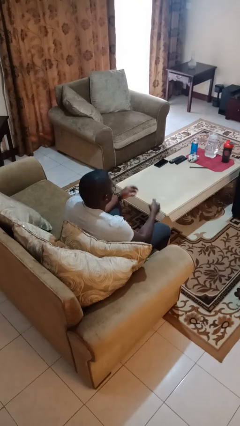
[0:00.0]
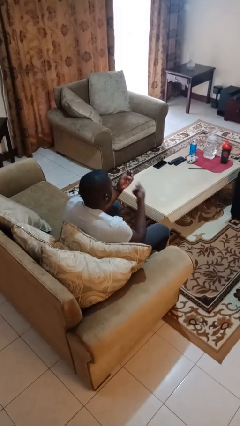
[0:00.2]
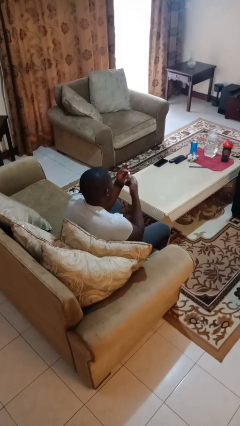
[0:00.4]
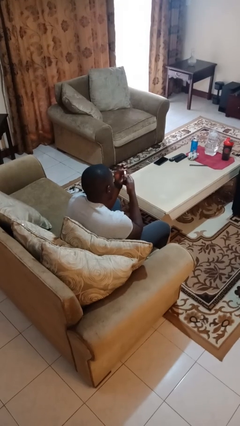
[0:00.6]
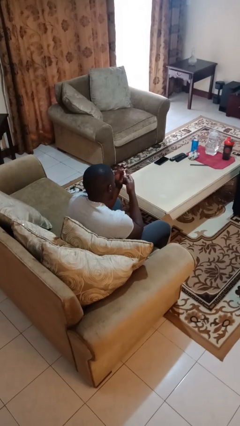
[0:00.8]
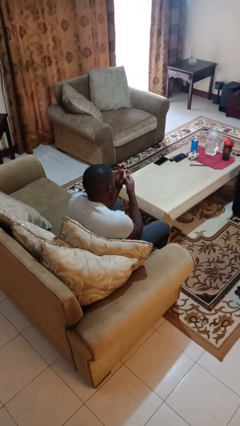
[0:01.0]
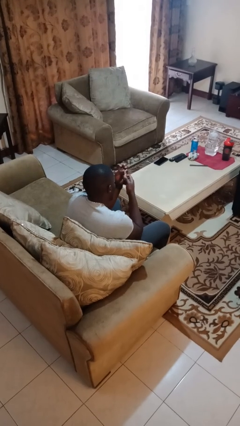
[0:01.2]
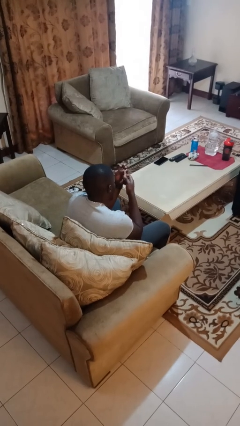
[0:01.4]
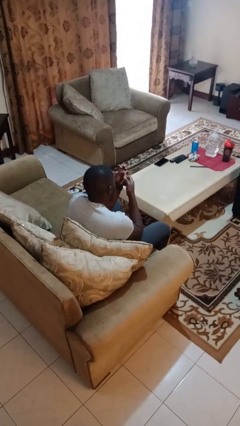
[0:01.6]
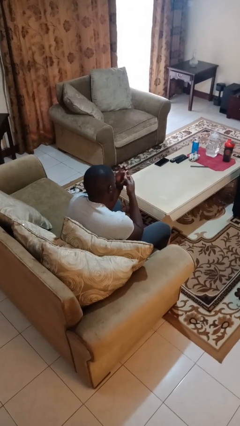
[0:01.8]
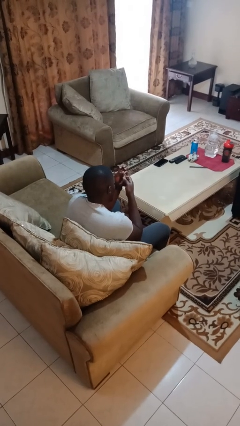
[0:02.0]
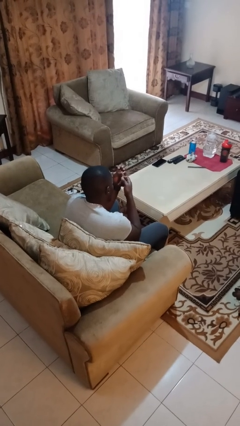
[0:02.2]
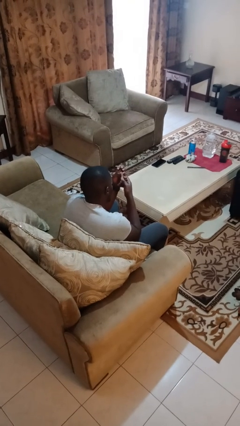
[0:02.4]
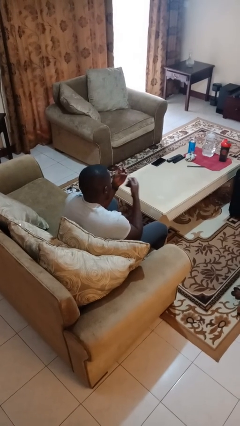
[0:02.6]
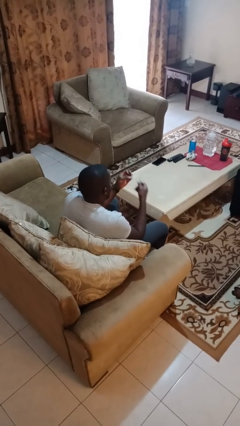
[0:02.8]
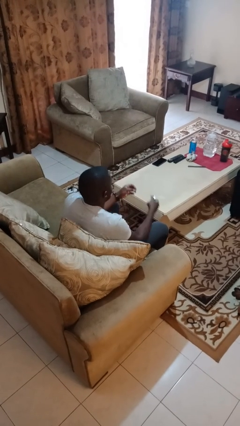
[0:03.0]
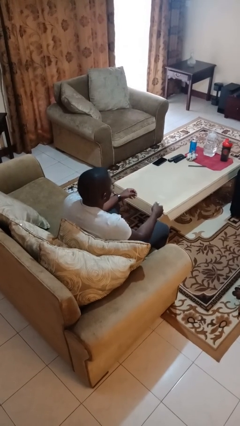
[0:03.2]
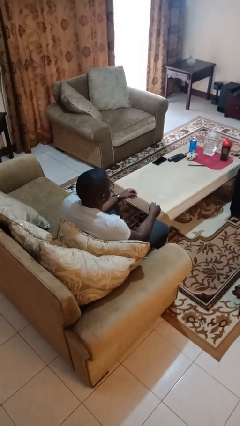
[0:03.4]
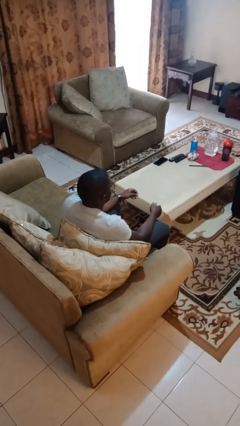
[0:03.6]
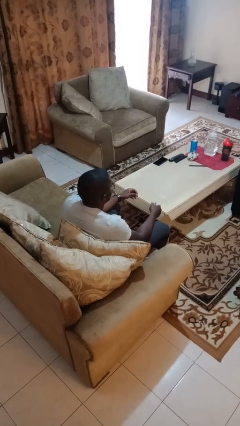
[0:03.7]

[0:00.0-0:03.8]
person clips fingernails

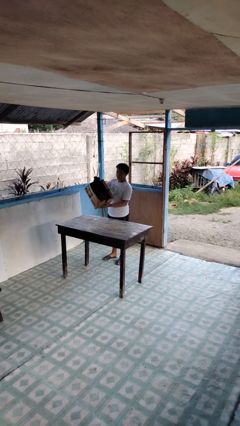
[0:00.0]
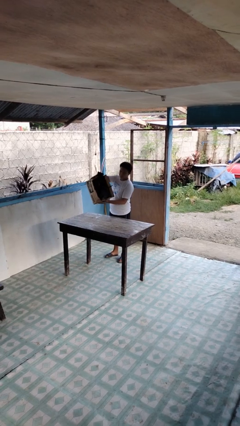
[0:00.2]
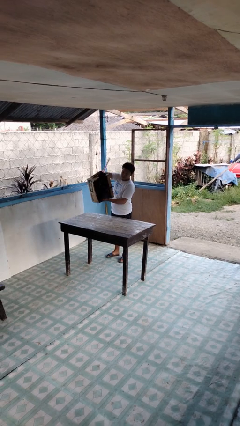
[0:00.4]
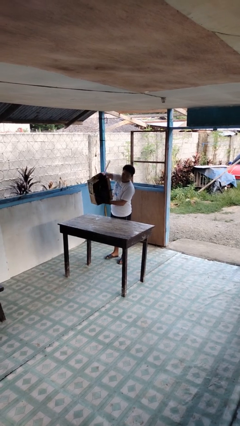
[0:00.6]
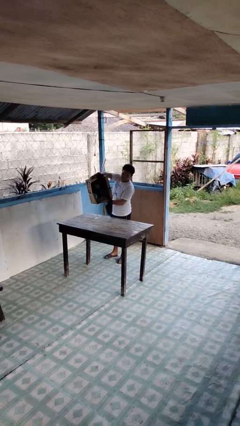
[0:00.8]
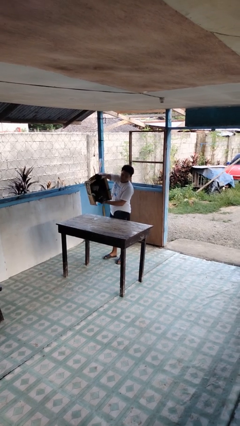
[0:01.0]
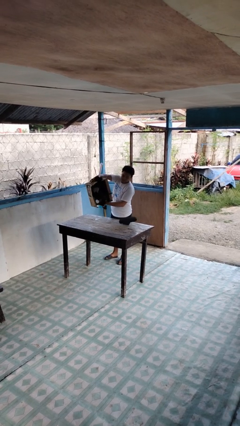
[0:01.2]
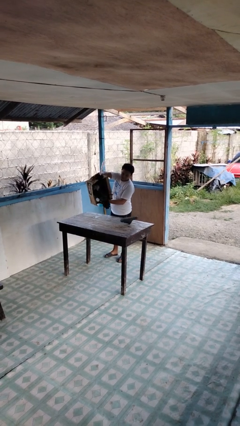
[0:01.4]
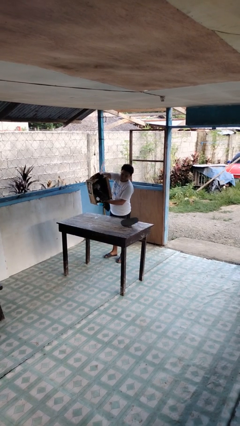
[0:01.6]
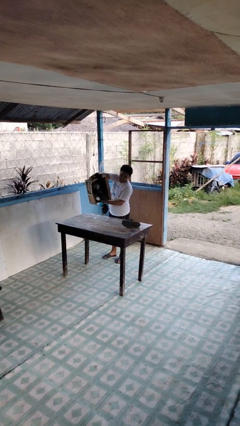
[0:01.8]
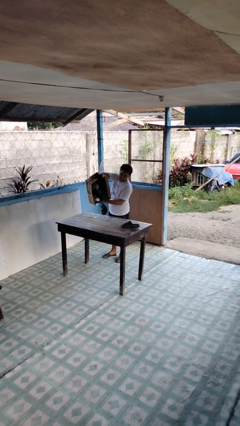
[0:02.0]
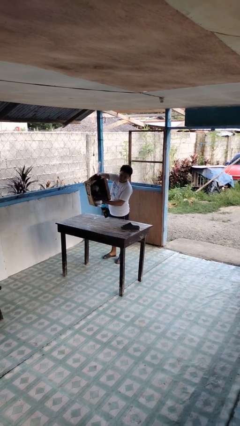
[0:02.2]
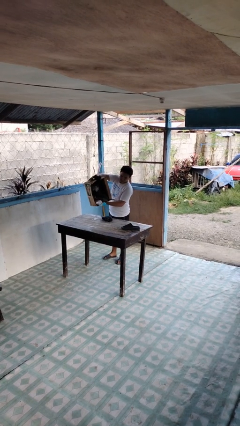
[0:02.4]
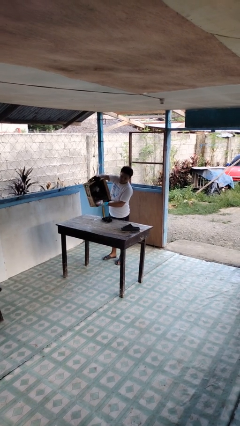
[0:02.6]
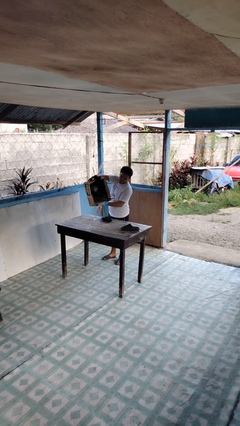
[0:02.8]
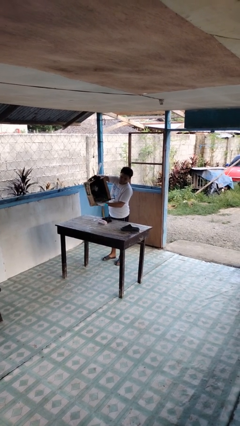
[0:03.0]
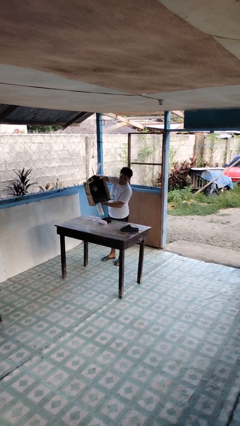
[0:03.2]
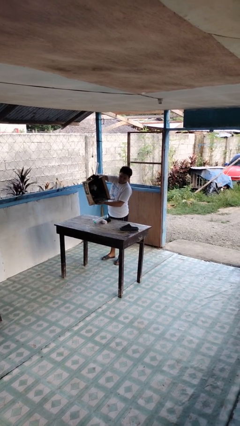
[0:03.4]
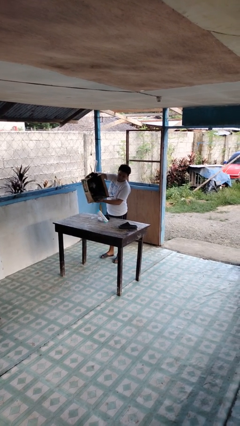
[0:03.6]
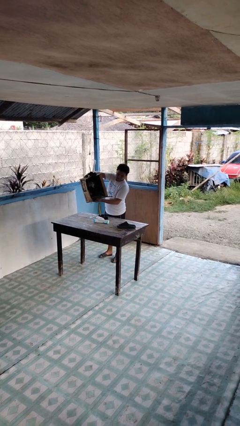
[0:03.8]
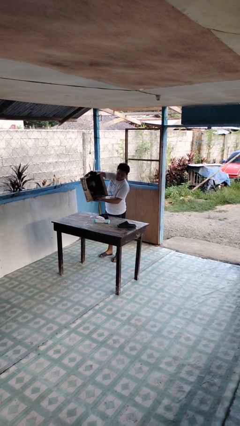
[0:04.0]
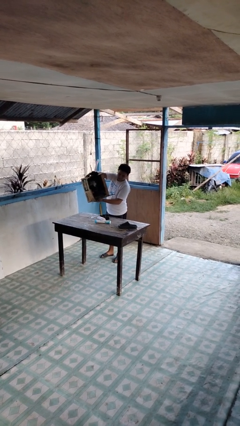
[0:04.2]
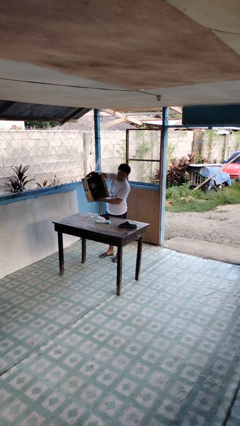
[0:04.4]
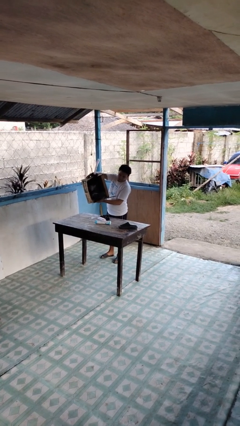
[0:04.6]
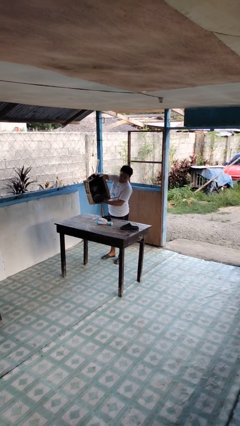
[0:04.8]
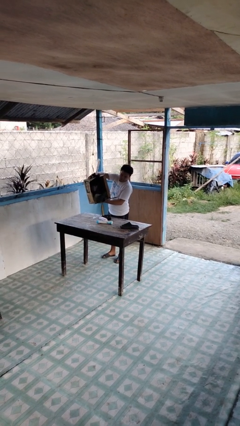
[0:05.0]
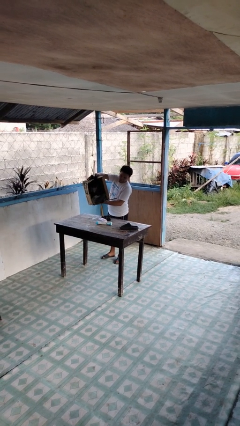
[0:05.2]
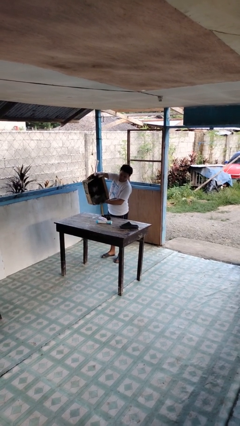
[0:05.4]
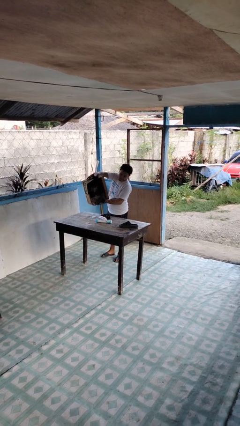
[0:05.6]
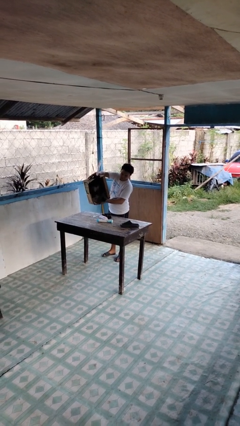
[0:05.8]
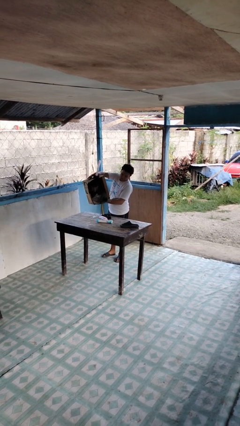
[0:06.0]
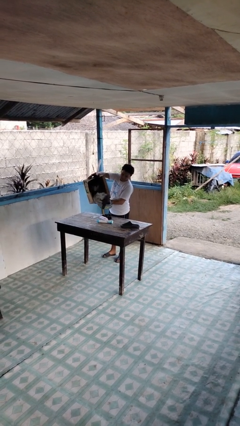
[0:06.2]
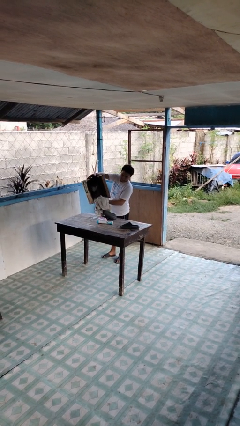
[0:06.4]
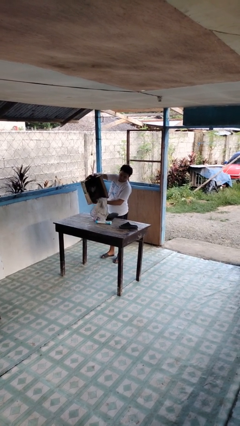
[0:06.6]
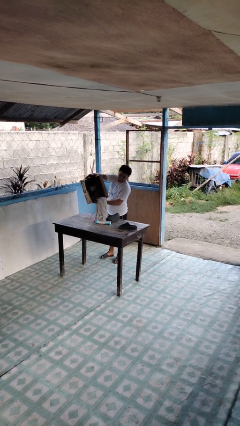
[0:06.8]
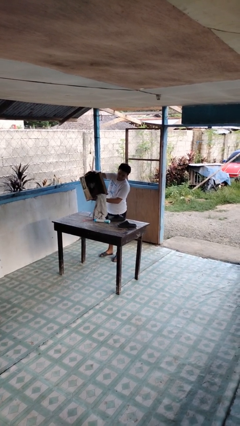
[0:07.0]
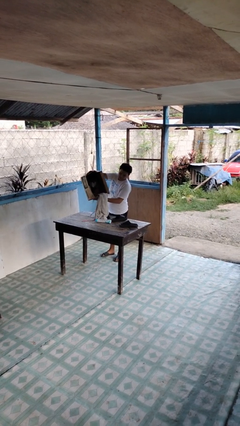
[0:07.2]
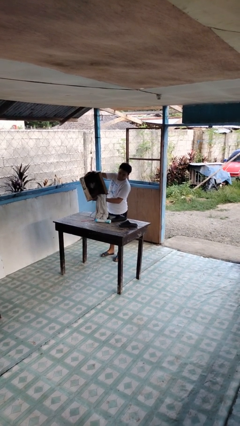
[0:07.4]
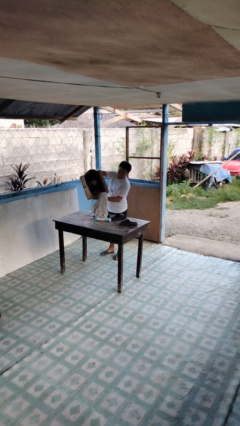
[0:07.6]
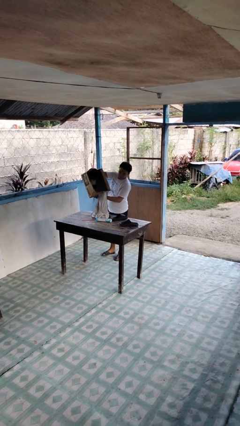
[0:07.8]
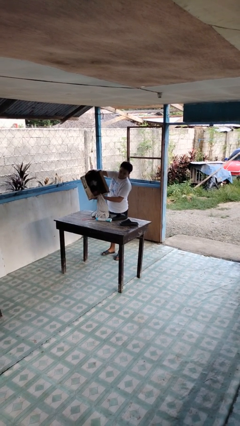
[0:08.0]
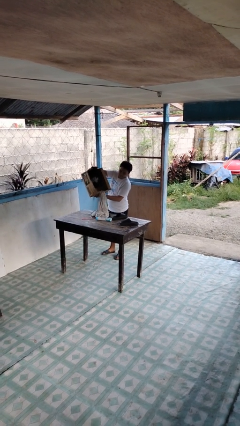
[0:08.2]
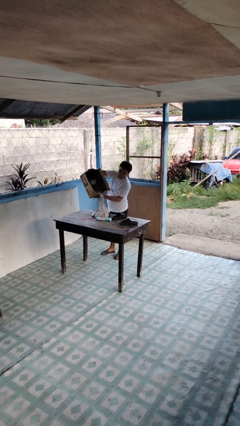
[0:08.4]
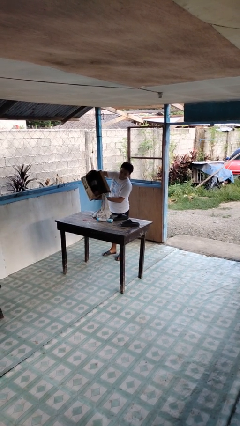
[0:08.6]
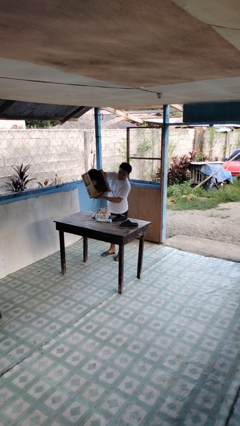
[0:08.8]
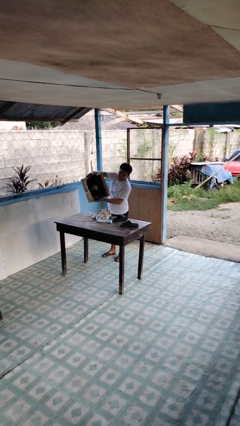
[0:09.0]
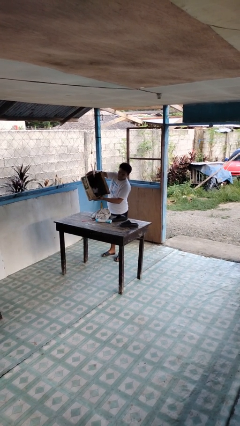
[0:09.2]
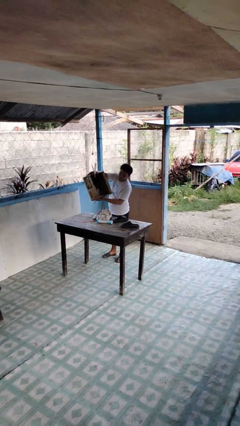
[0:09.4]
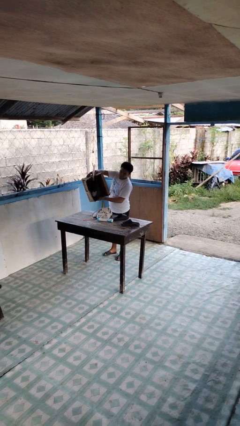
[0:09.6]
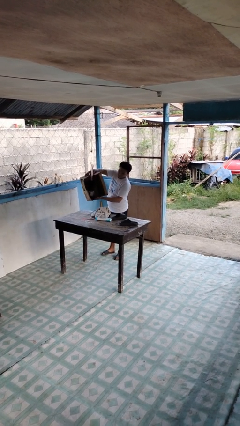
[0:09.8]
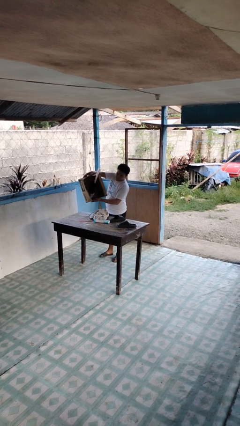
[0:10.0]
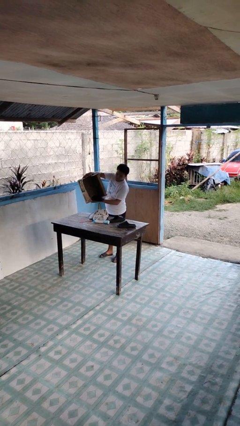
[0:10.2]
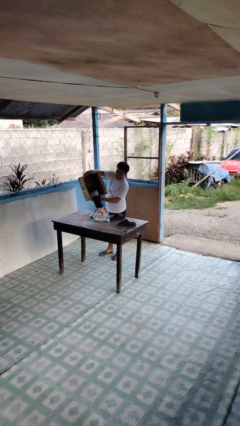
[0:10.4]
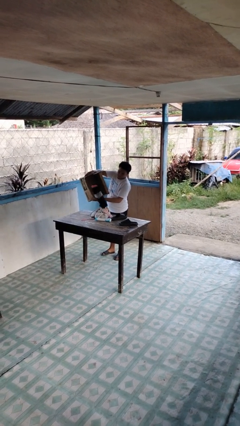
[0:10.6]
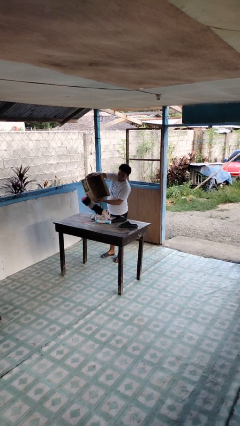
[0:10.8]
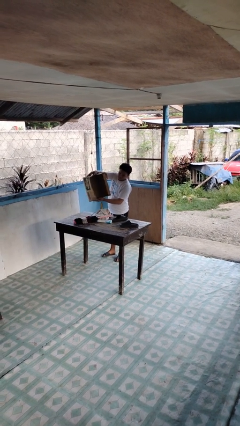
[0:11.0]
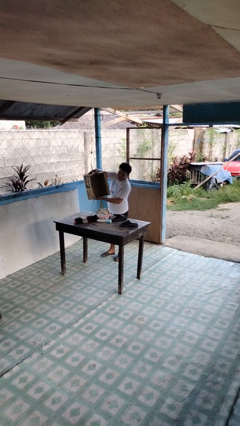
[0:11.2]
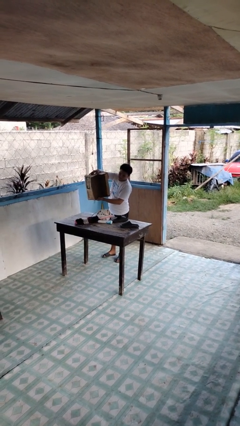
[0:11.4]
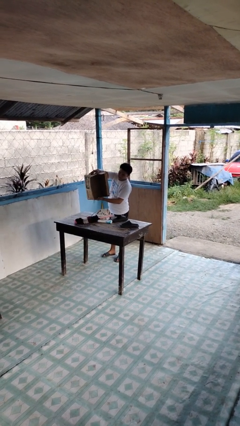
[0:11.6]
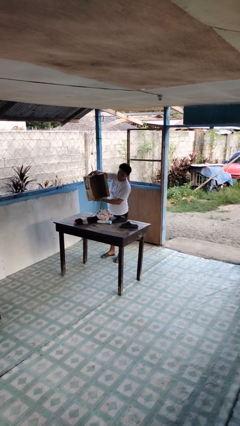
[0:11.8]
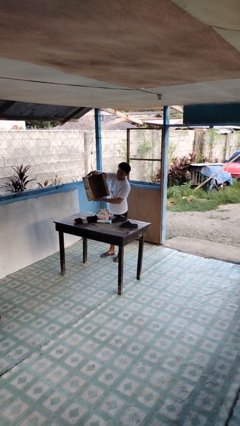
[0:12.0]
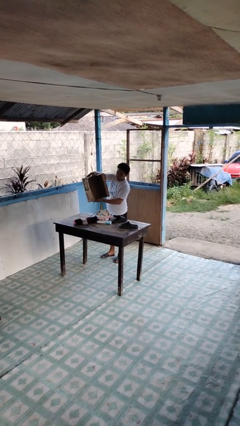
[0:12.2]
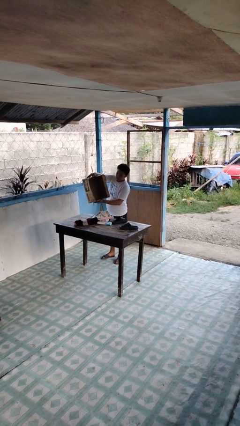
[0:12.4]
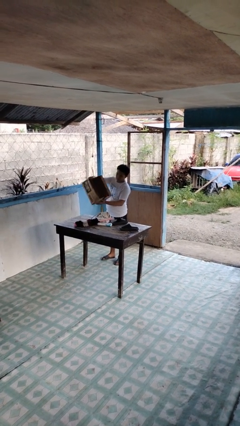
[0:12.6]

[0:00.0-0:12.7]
person unloads box onto table

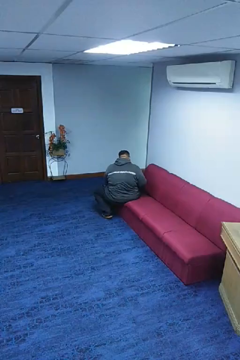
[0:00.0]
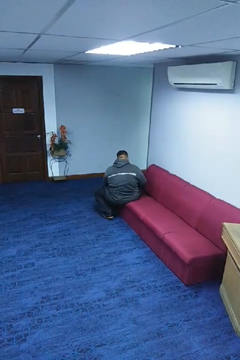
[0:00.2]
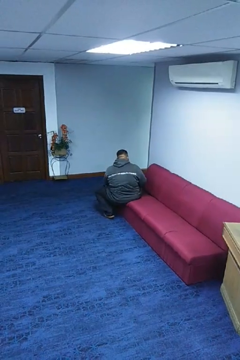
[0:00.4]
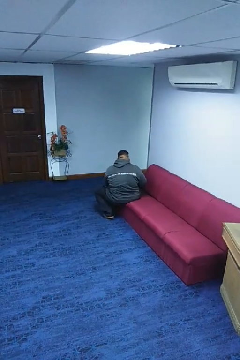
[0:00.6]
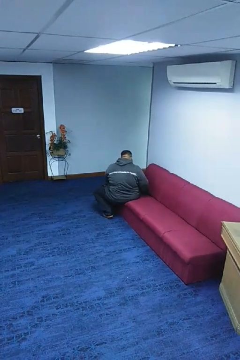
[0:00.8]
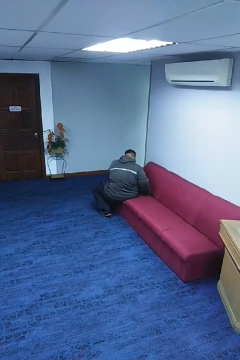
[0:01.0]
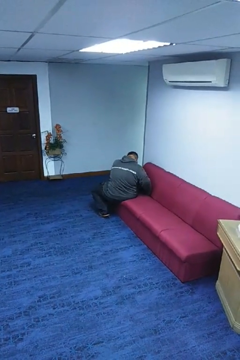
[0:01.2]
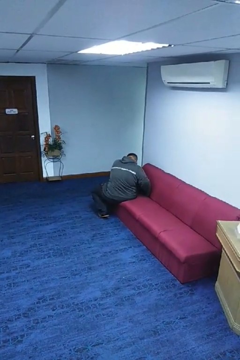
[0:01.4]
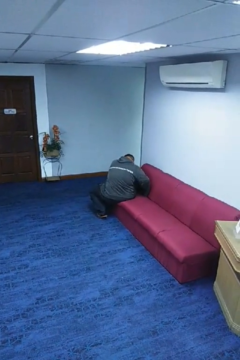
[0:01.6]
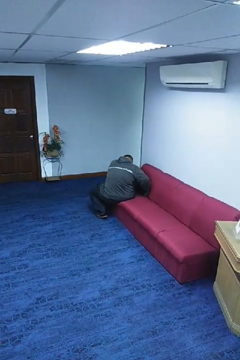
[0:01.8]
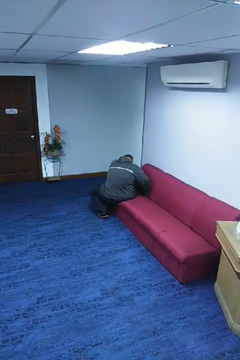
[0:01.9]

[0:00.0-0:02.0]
person searches in couch
